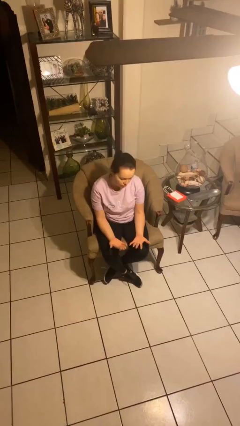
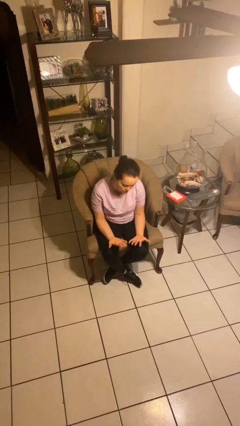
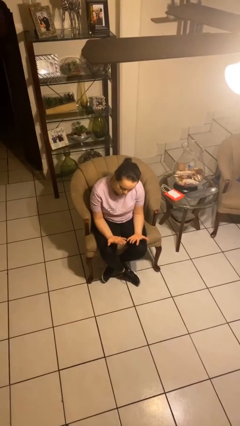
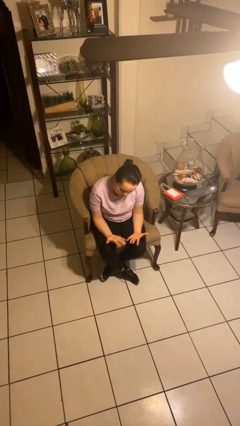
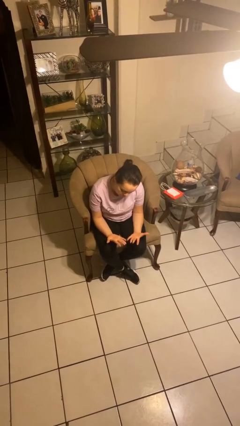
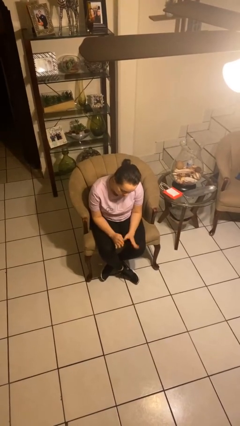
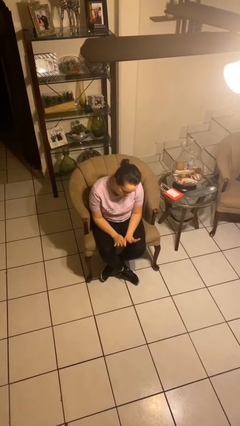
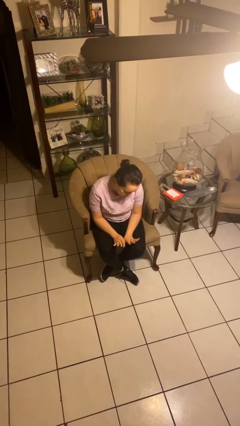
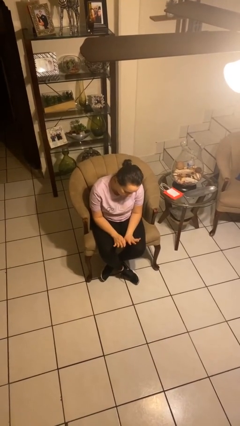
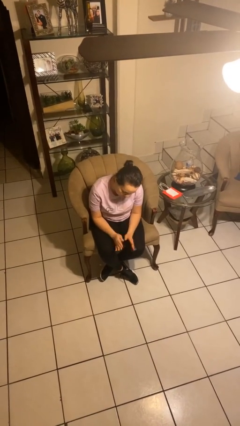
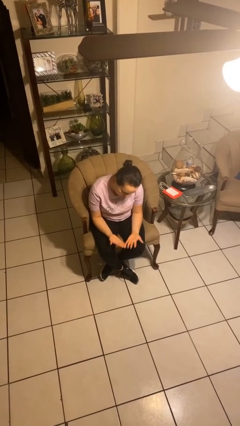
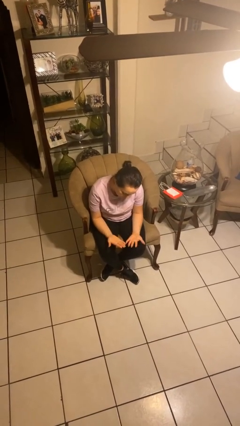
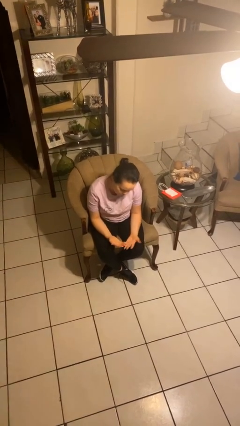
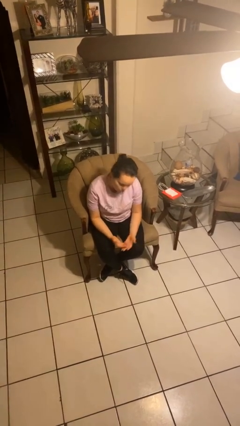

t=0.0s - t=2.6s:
person looks at hands in lap

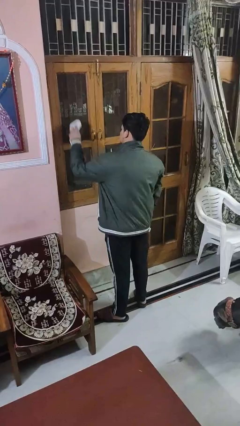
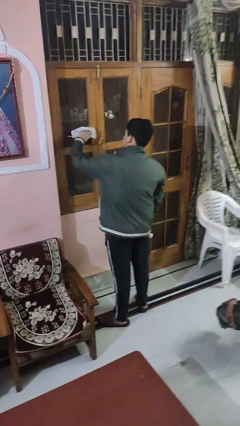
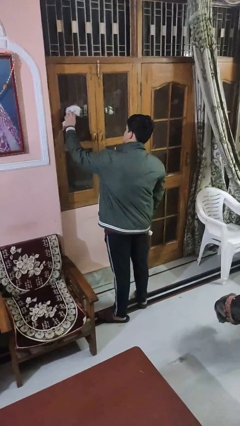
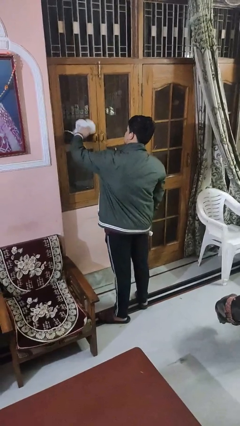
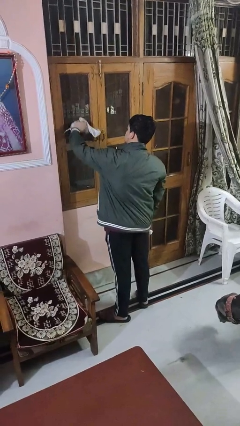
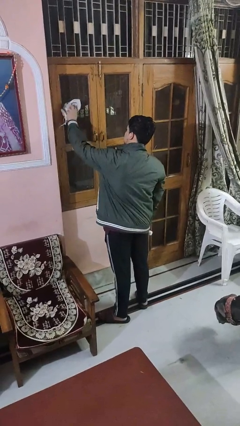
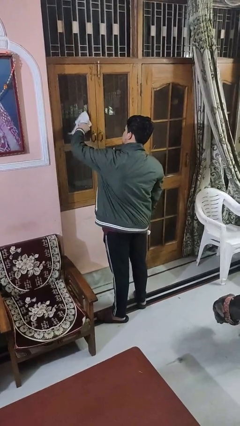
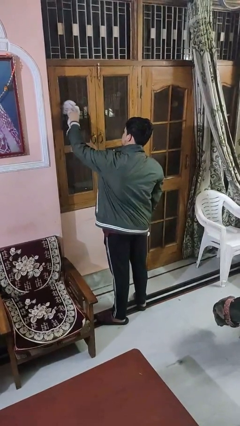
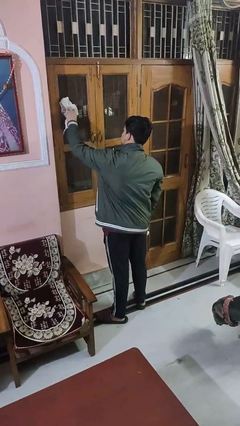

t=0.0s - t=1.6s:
person washes window

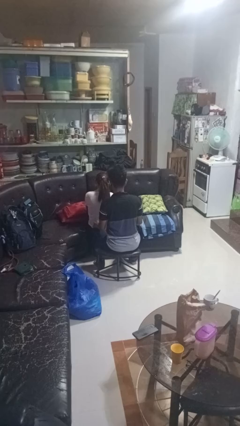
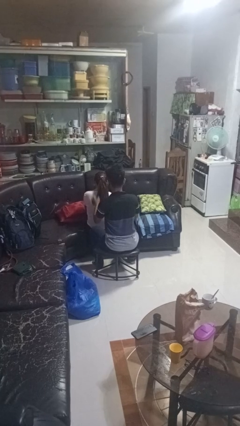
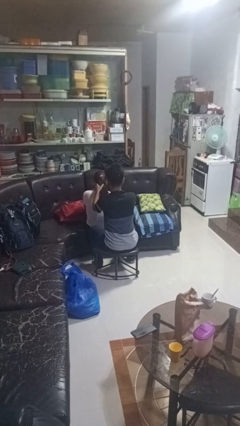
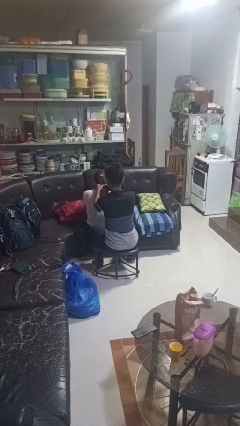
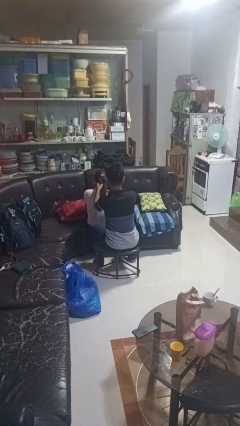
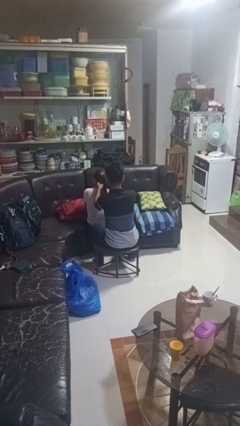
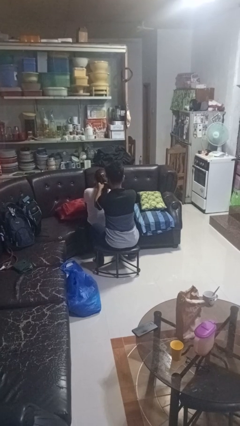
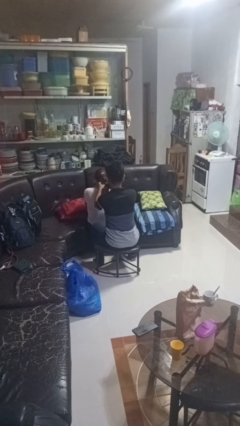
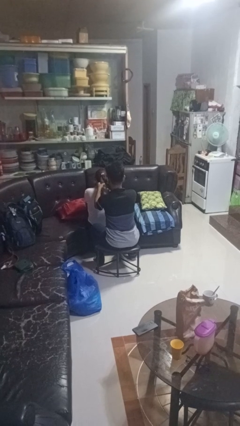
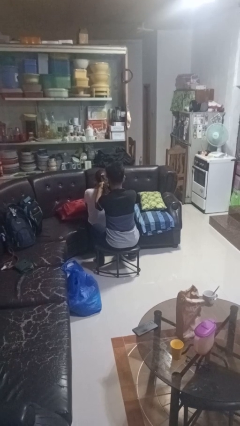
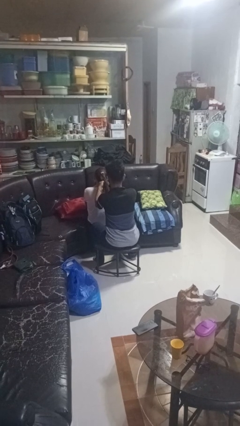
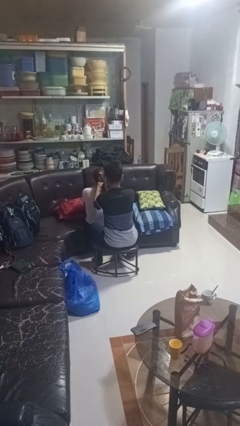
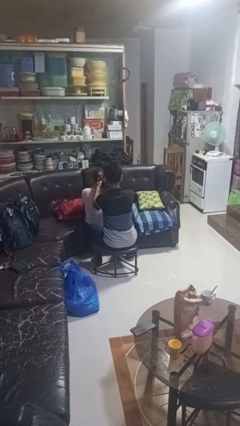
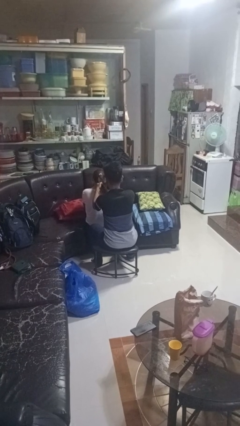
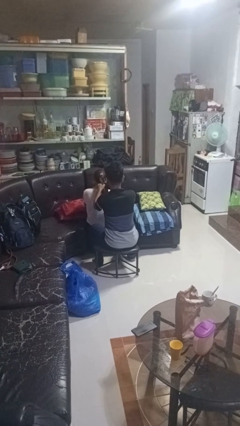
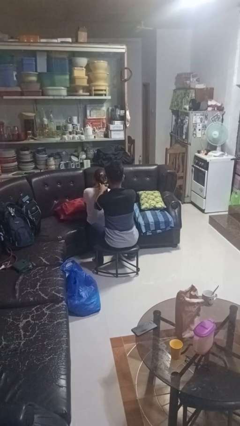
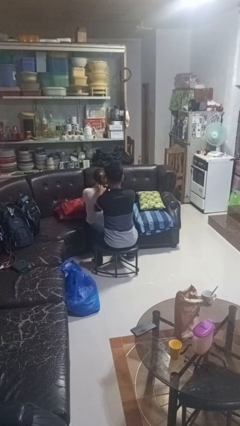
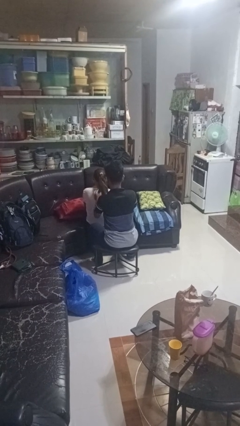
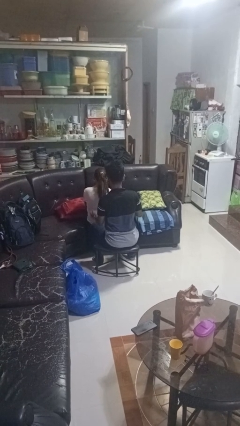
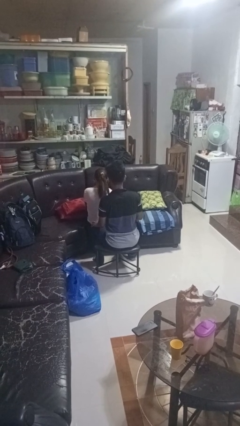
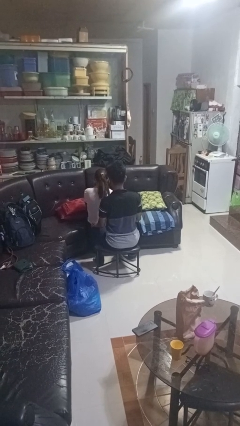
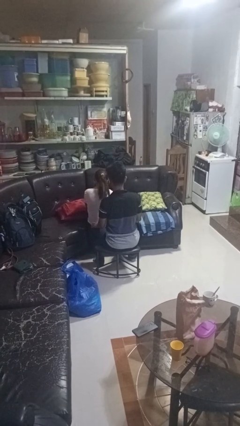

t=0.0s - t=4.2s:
person braids hair of person

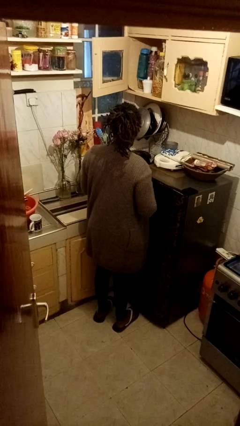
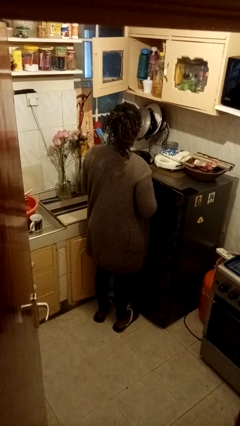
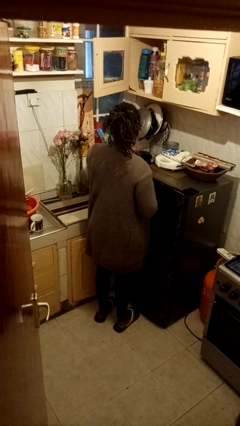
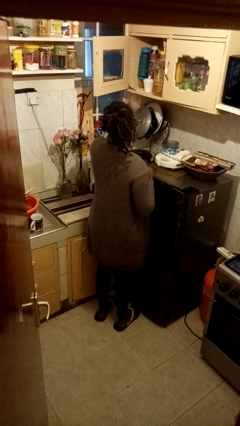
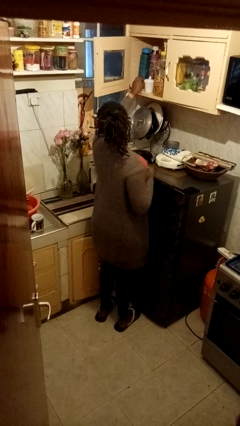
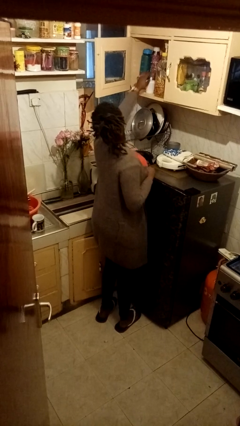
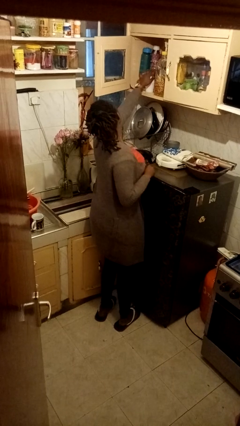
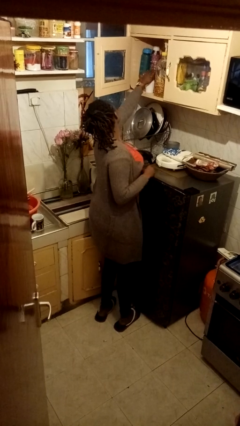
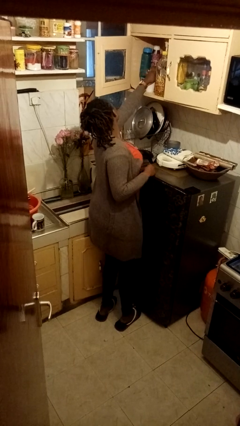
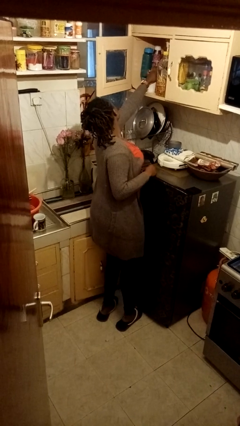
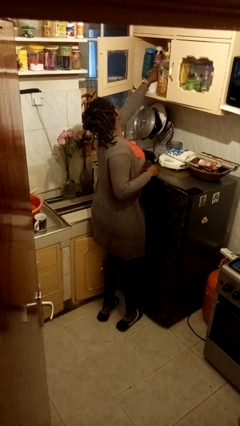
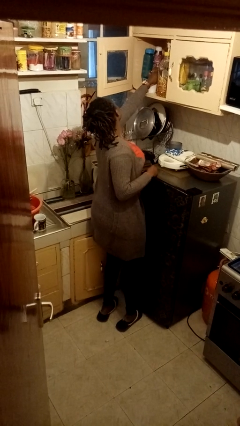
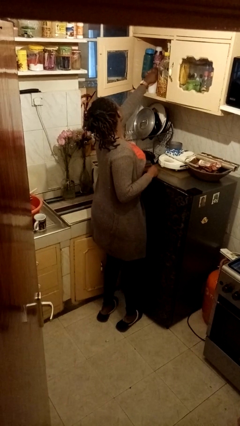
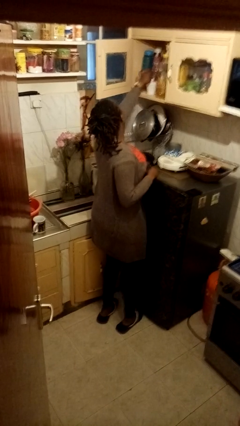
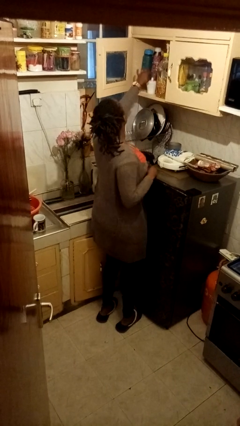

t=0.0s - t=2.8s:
person searches in cabinet

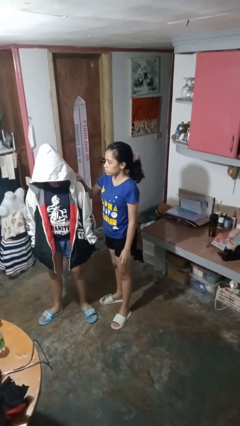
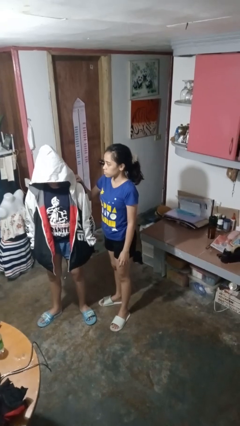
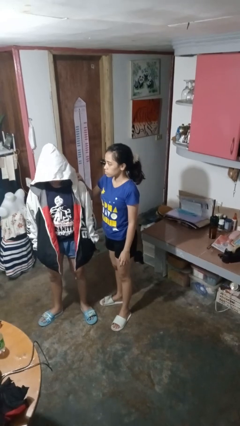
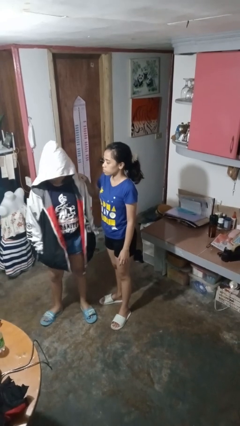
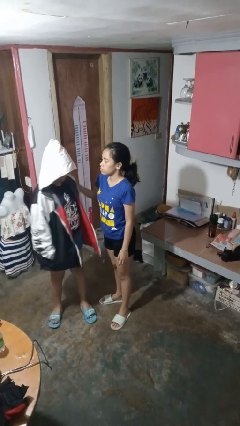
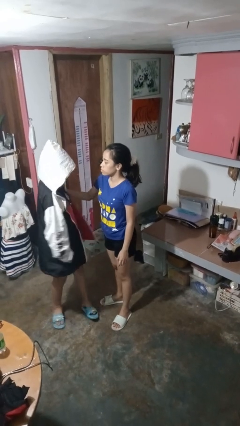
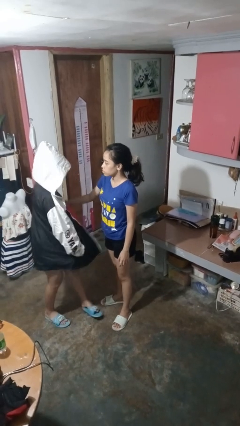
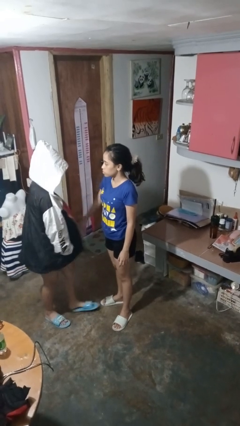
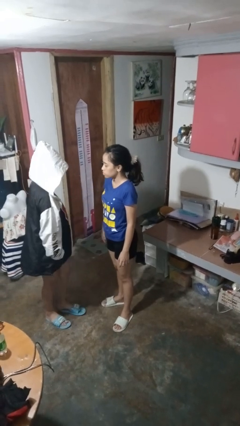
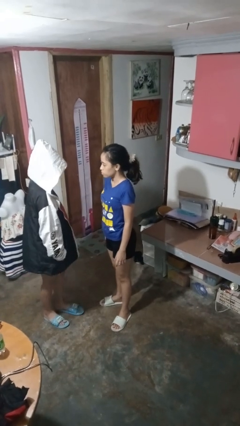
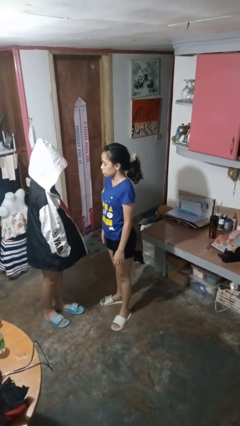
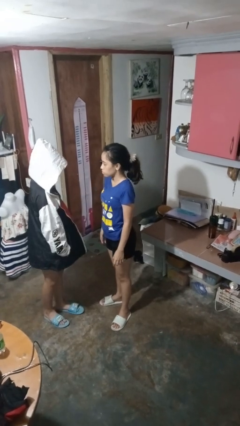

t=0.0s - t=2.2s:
person spins person around

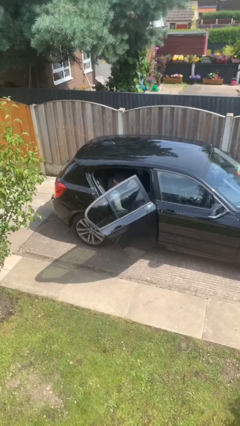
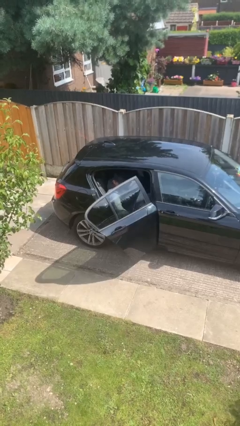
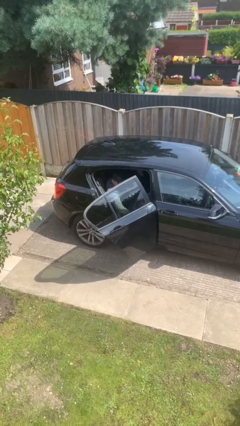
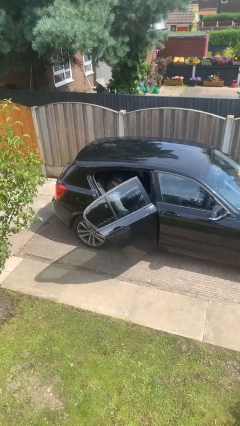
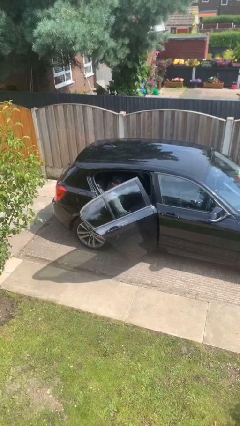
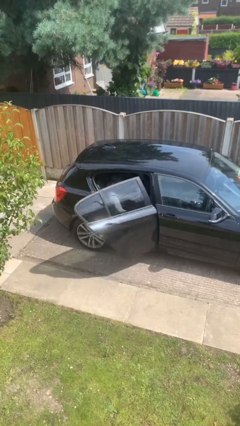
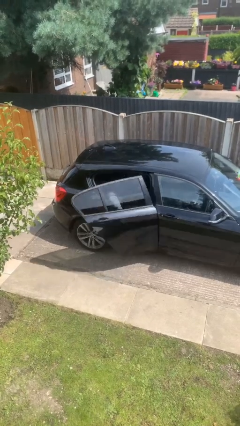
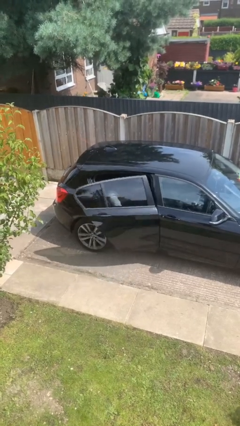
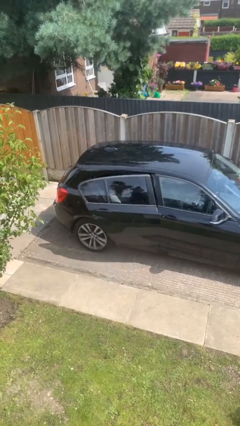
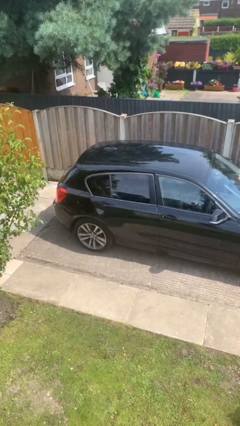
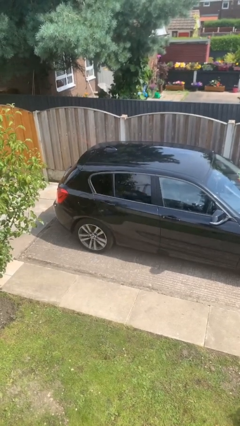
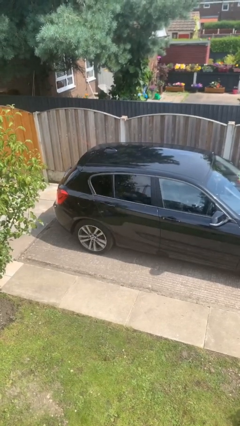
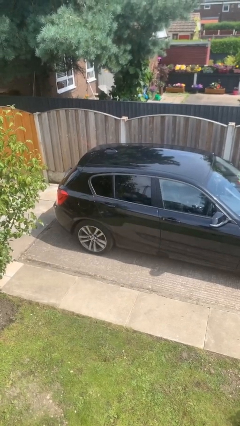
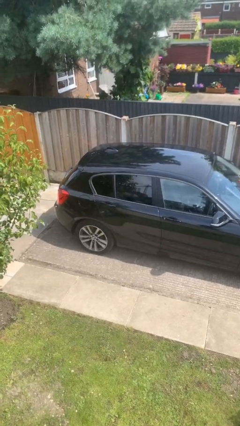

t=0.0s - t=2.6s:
person closes car door

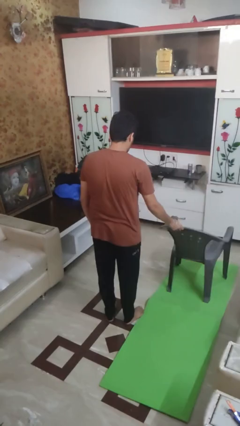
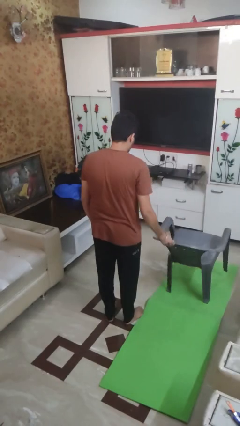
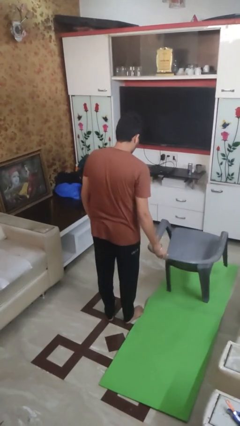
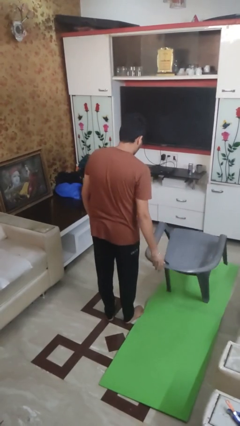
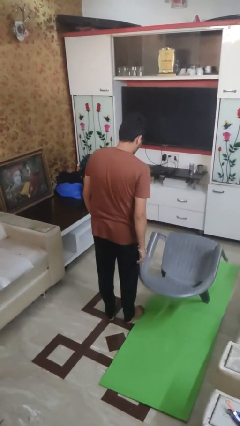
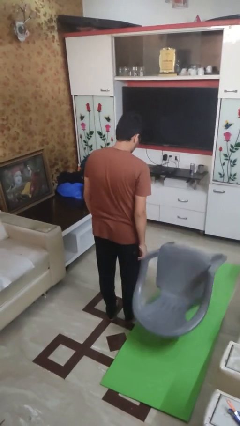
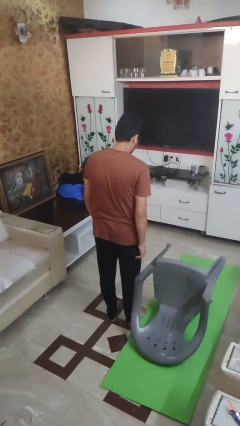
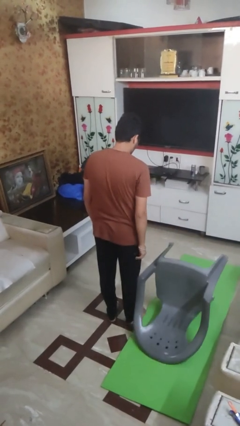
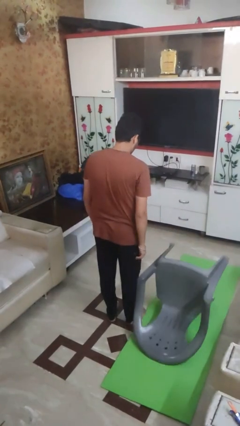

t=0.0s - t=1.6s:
person knocks over furniture
